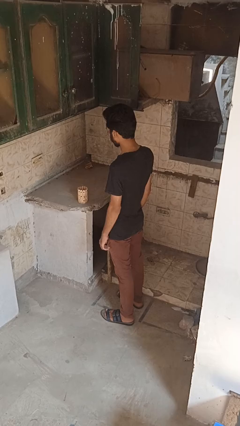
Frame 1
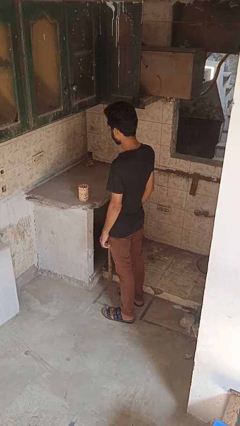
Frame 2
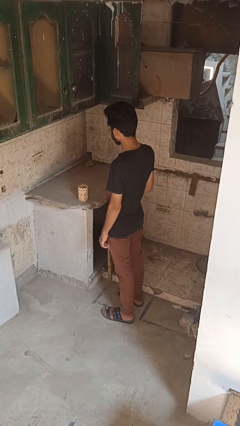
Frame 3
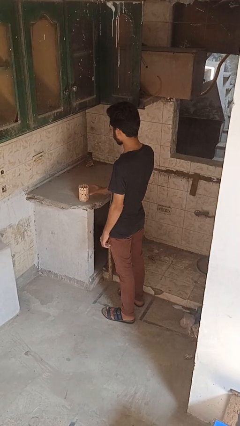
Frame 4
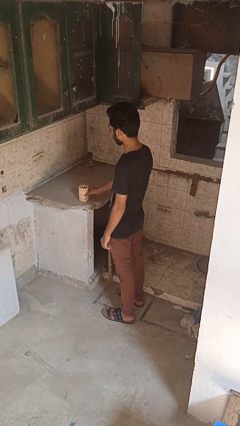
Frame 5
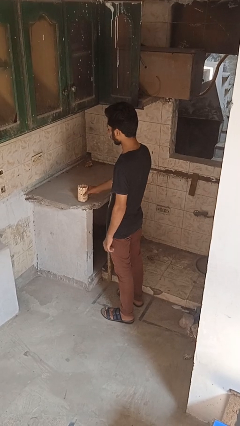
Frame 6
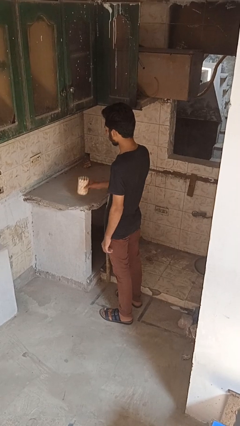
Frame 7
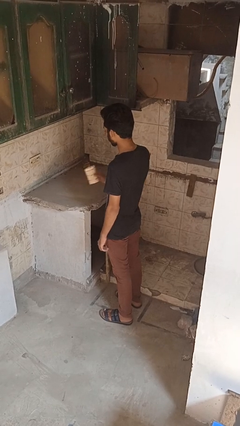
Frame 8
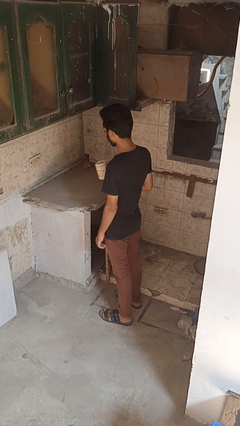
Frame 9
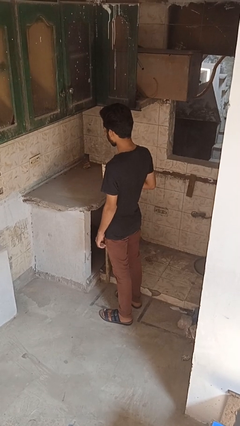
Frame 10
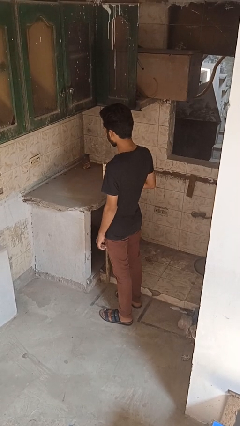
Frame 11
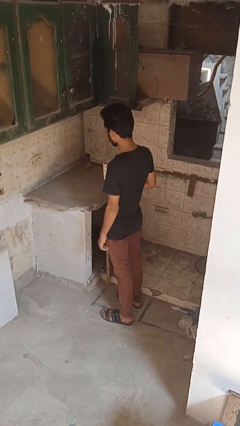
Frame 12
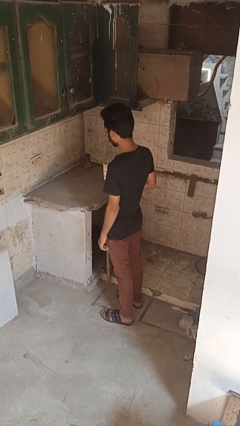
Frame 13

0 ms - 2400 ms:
person picks up object from countertop

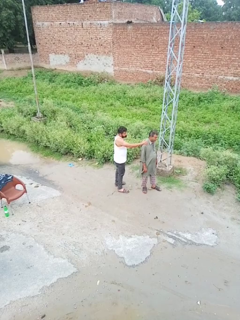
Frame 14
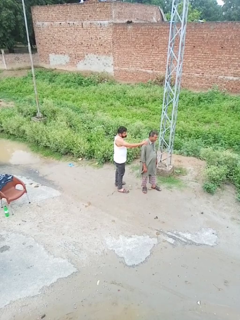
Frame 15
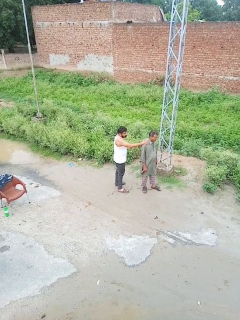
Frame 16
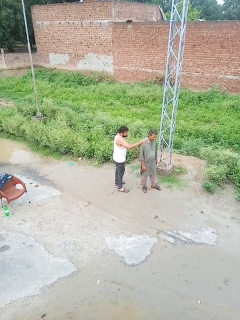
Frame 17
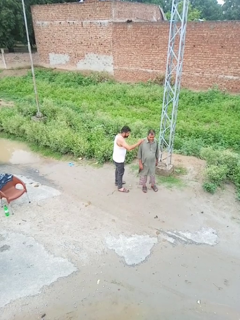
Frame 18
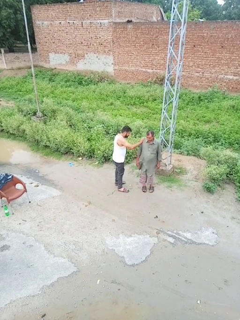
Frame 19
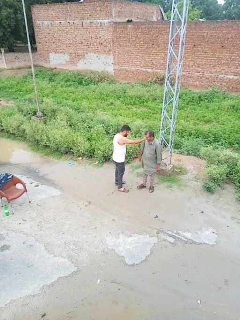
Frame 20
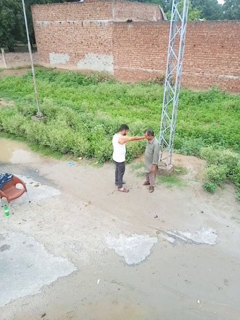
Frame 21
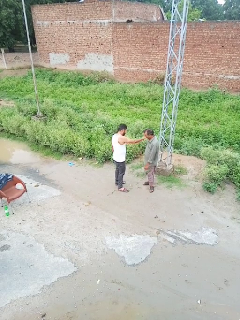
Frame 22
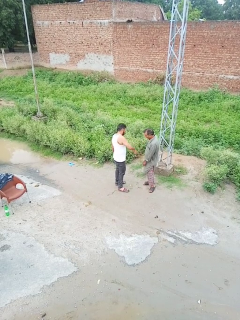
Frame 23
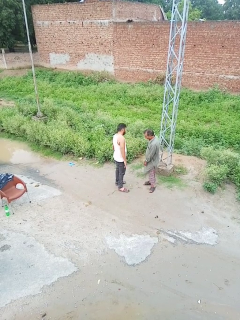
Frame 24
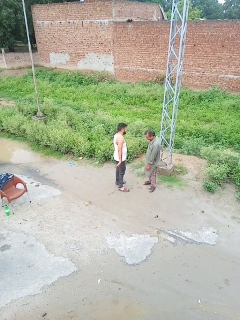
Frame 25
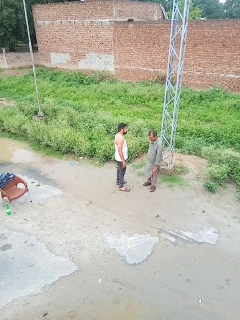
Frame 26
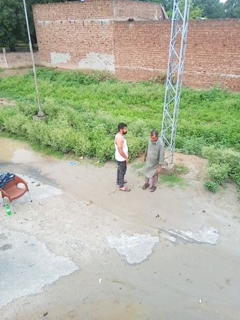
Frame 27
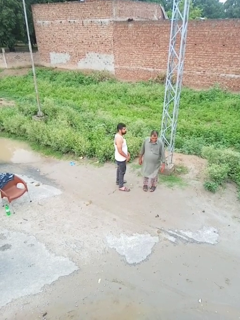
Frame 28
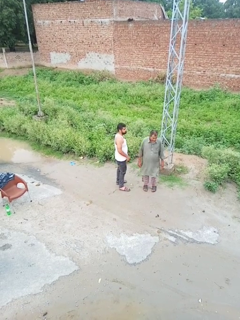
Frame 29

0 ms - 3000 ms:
person spins person around

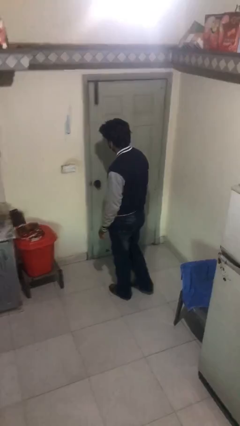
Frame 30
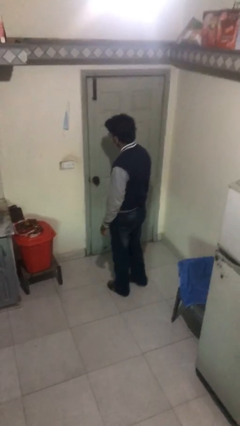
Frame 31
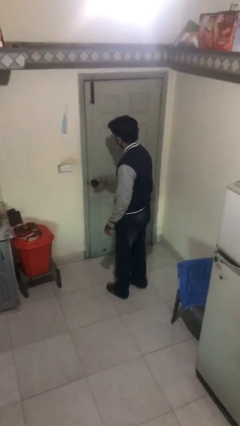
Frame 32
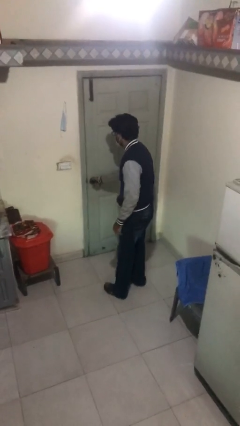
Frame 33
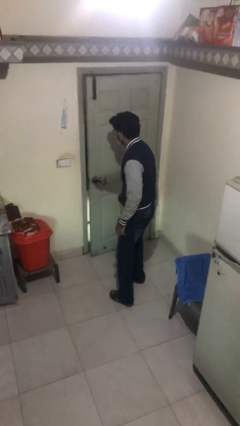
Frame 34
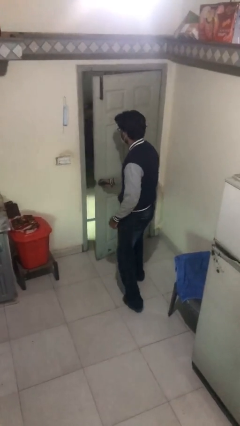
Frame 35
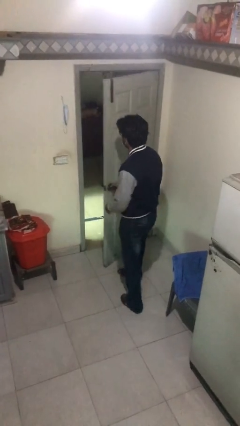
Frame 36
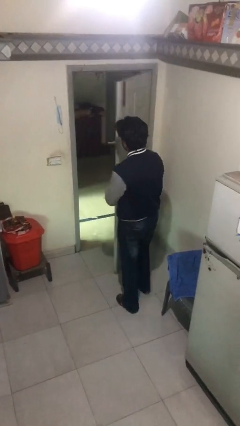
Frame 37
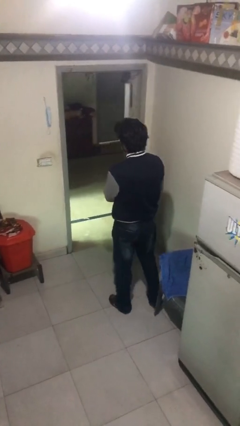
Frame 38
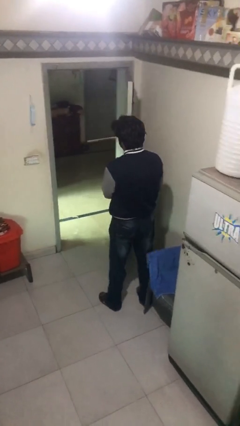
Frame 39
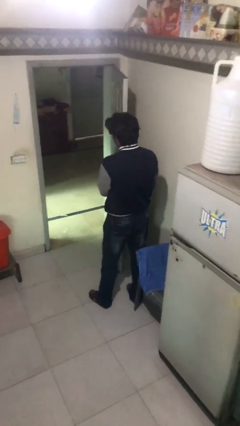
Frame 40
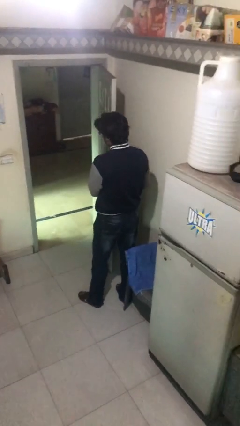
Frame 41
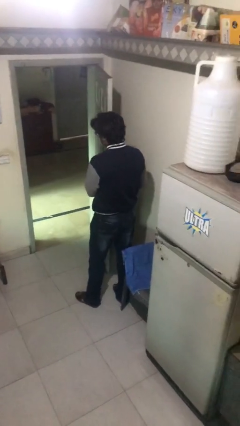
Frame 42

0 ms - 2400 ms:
person opens facility door

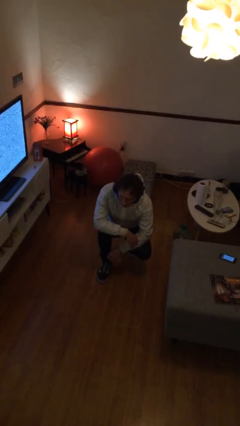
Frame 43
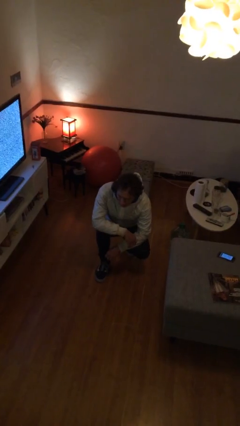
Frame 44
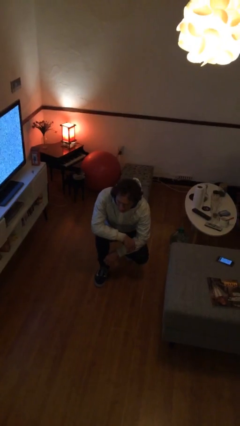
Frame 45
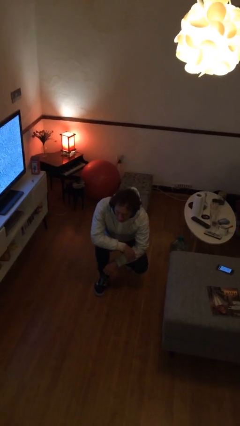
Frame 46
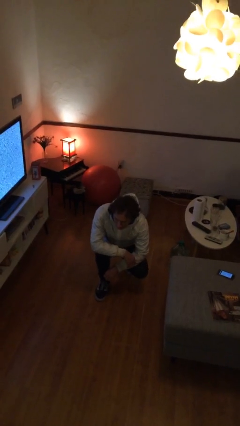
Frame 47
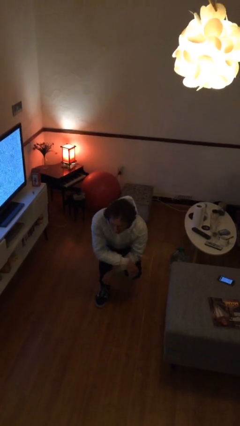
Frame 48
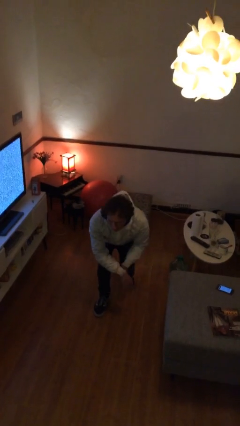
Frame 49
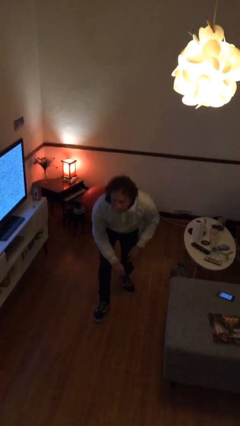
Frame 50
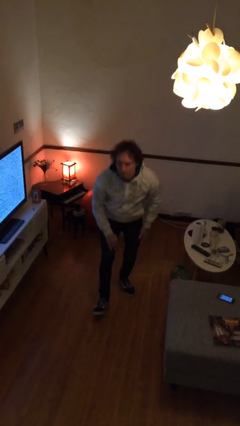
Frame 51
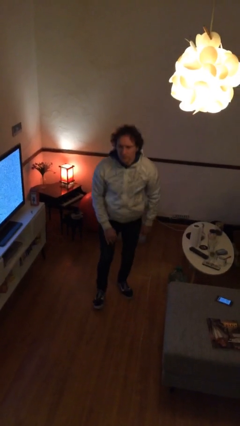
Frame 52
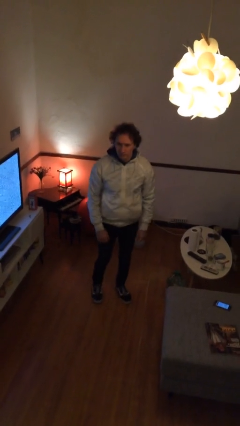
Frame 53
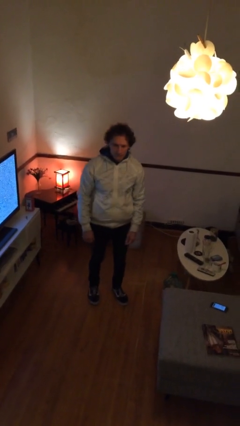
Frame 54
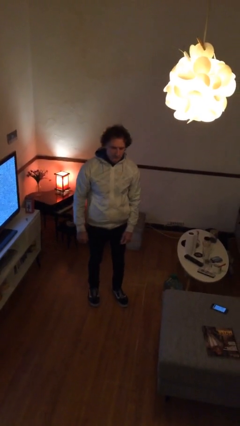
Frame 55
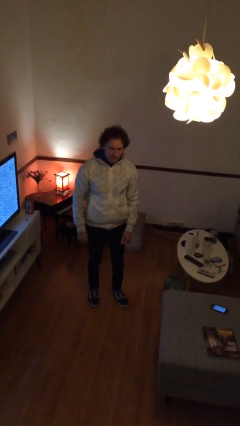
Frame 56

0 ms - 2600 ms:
person stands up

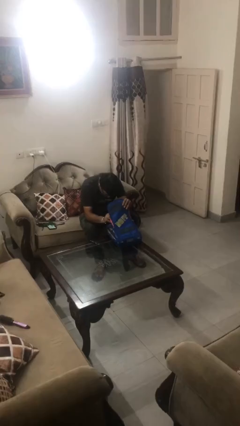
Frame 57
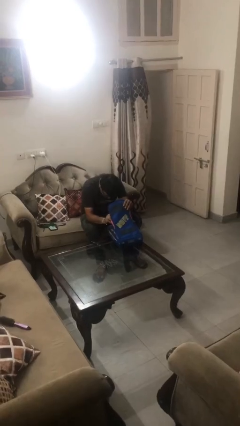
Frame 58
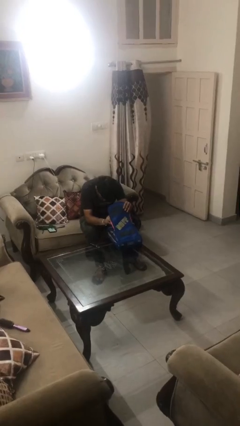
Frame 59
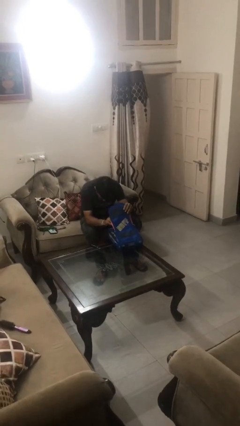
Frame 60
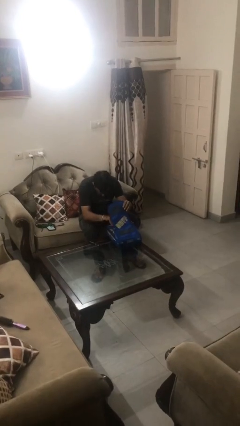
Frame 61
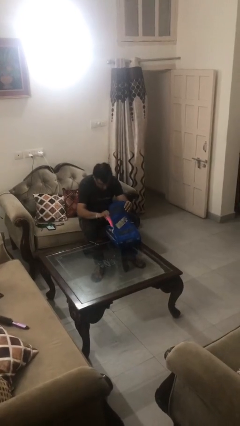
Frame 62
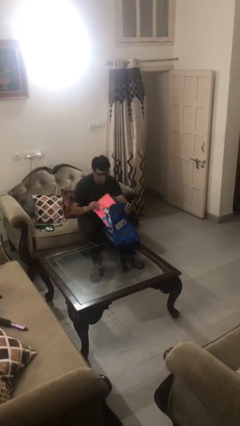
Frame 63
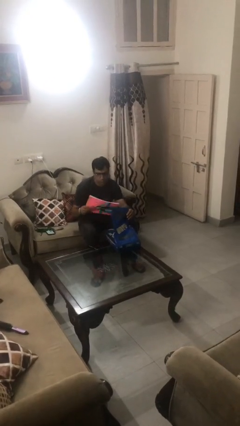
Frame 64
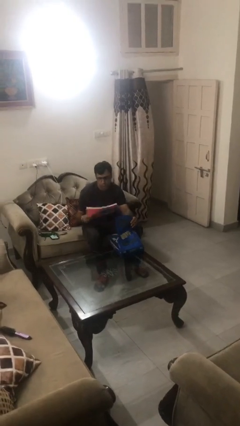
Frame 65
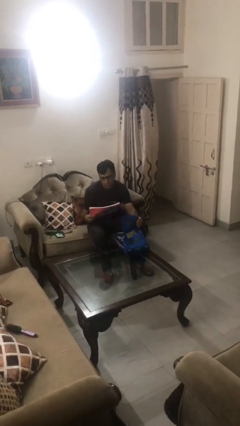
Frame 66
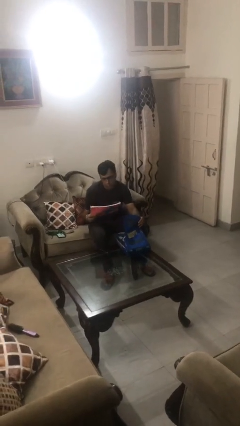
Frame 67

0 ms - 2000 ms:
person takes object from backpack

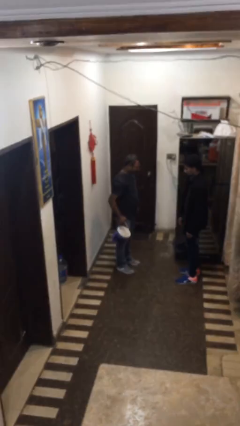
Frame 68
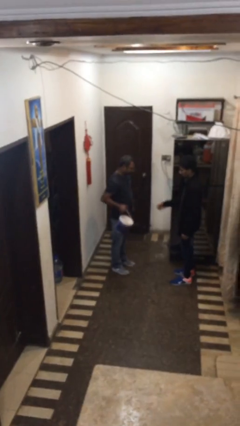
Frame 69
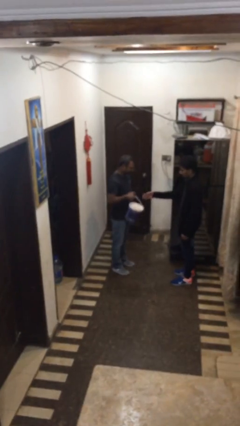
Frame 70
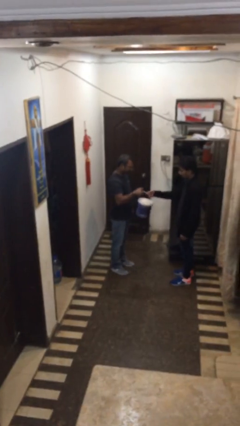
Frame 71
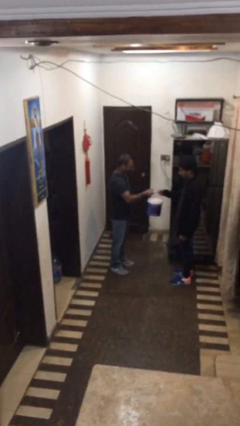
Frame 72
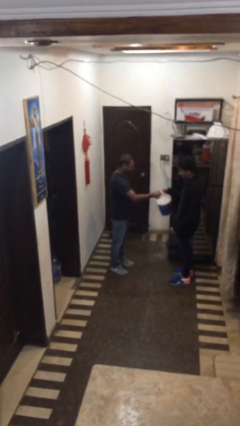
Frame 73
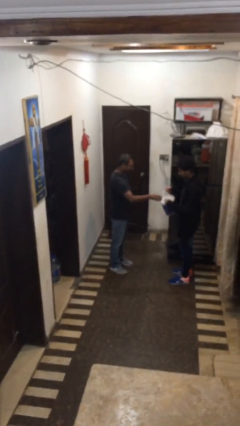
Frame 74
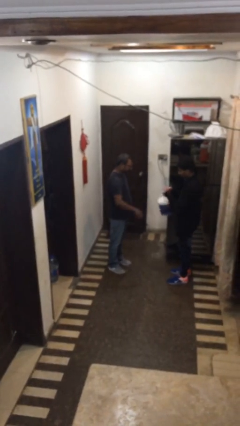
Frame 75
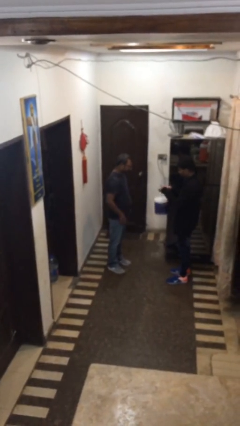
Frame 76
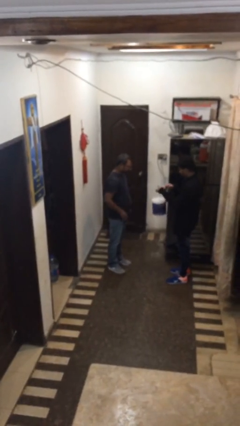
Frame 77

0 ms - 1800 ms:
person transfers object to person

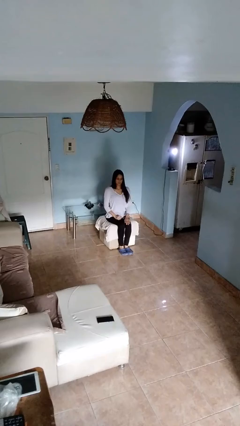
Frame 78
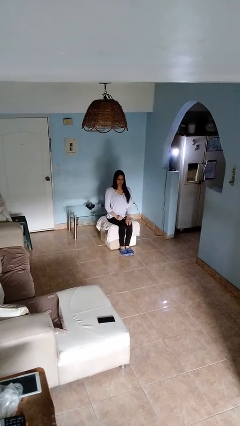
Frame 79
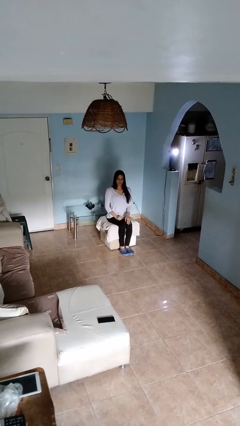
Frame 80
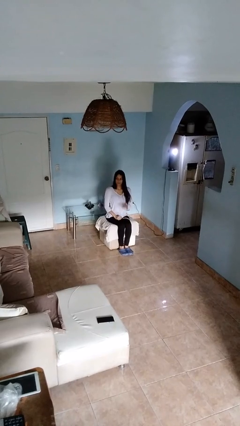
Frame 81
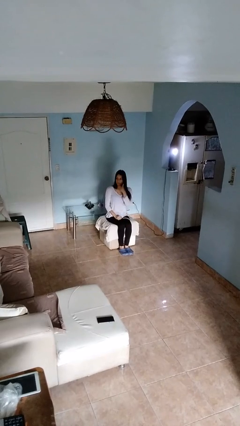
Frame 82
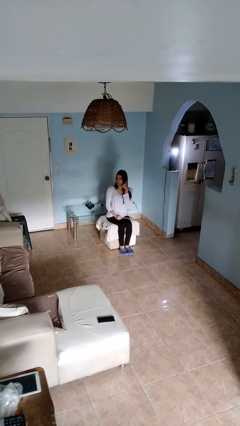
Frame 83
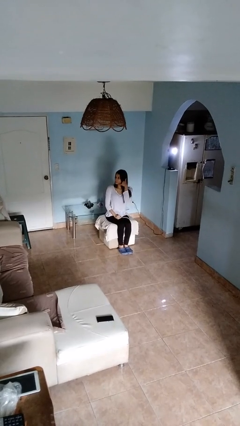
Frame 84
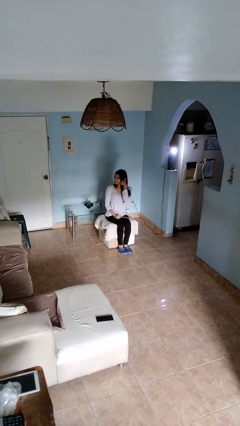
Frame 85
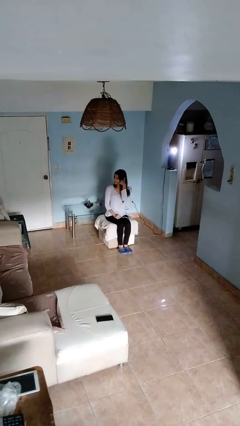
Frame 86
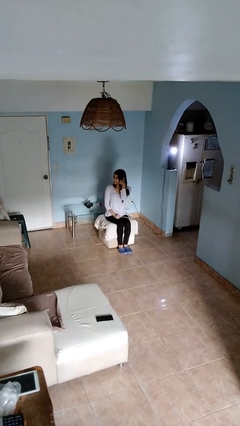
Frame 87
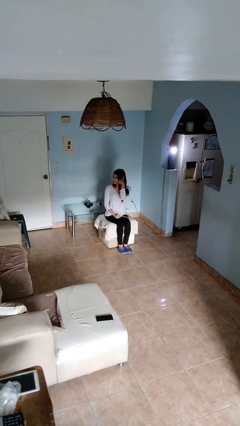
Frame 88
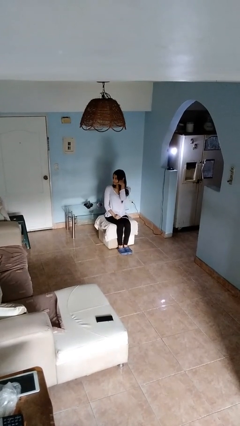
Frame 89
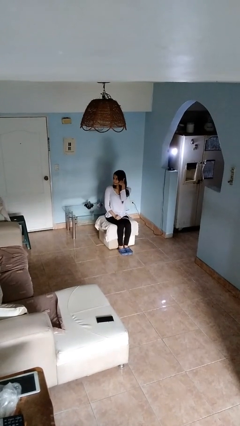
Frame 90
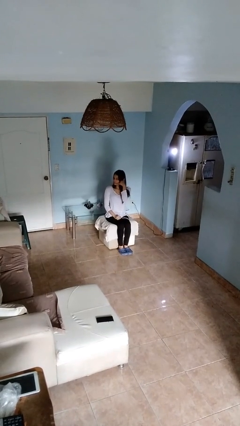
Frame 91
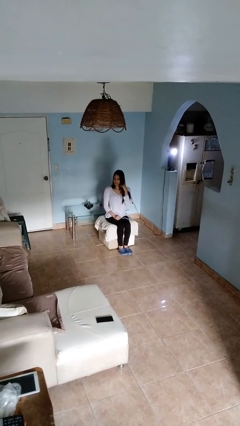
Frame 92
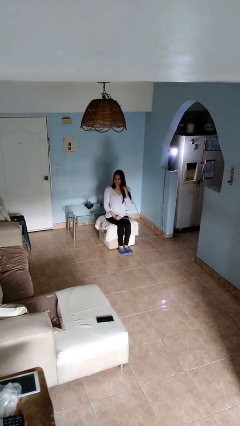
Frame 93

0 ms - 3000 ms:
person gestures call me

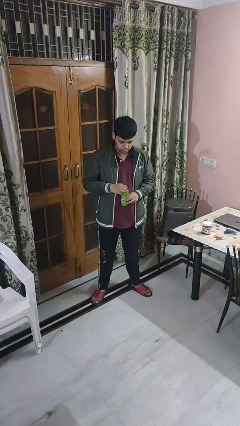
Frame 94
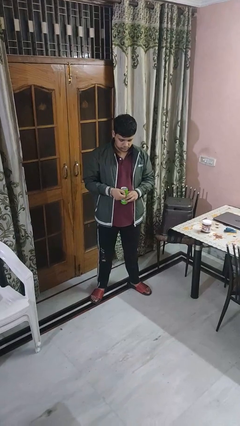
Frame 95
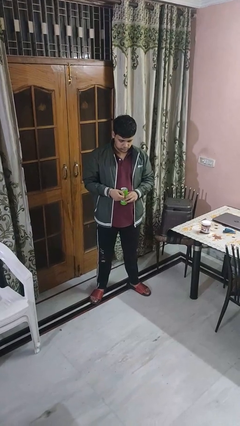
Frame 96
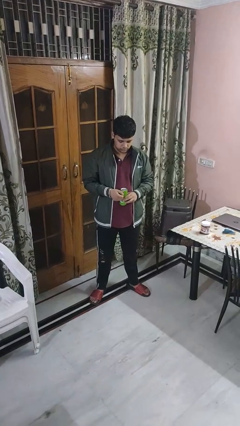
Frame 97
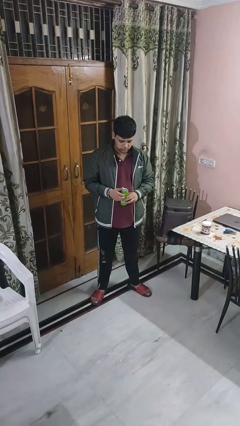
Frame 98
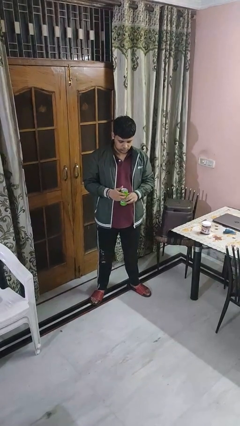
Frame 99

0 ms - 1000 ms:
person opens beverage can
